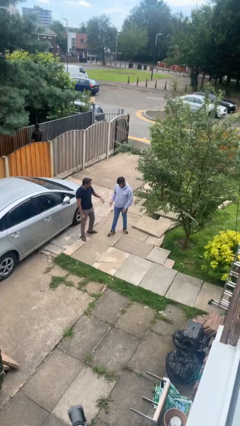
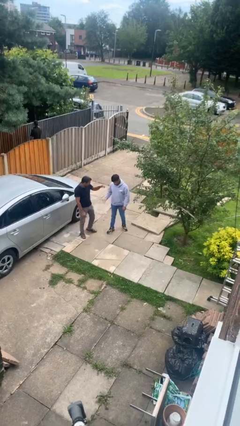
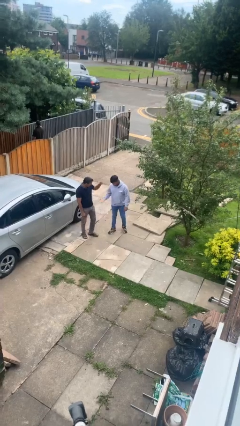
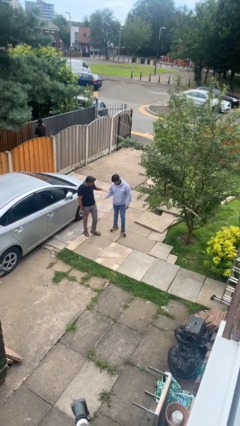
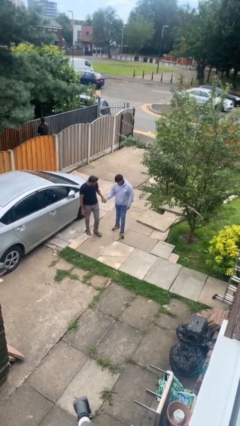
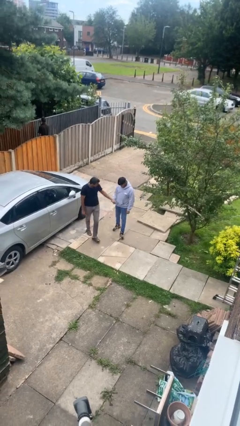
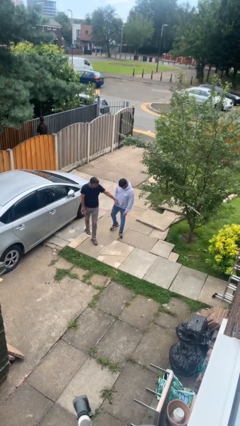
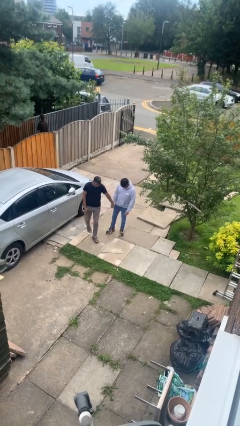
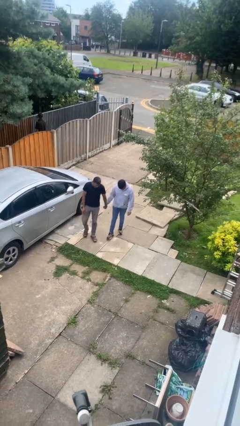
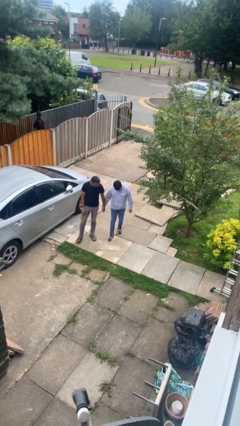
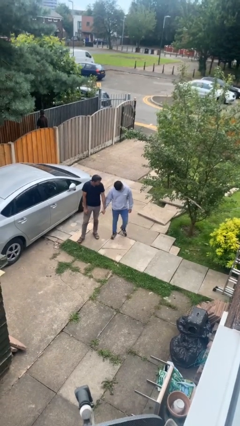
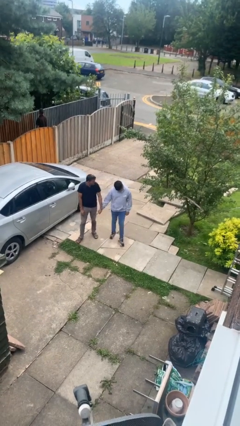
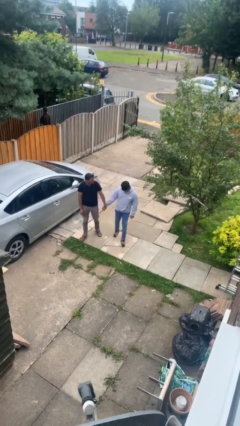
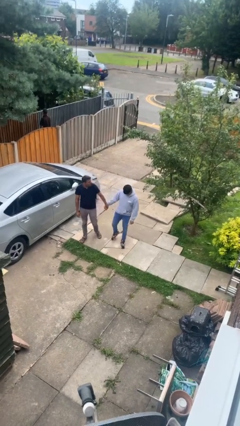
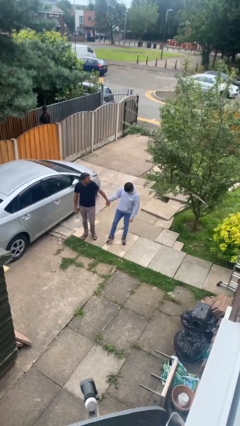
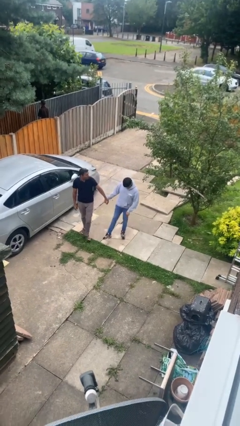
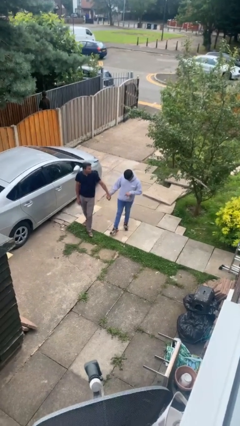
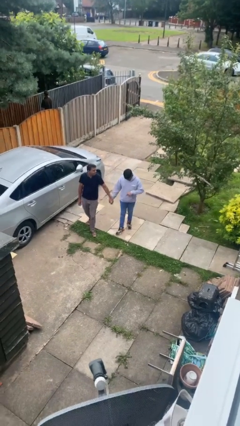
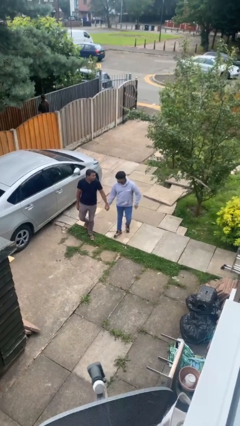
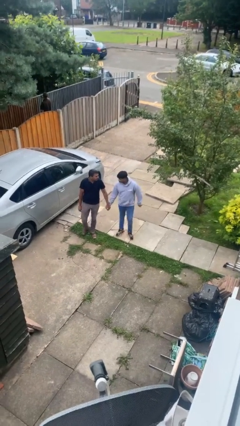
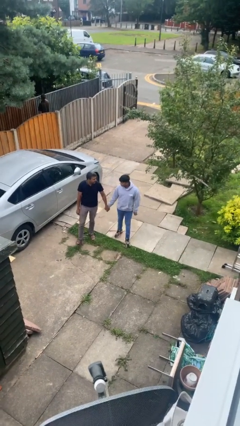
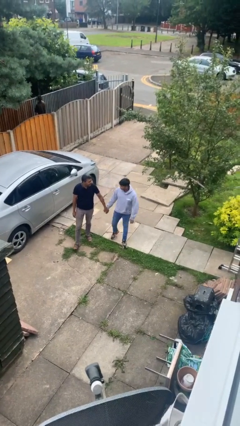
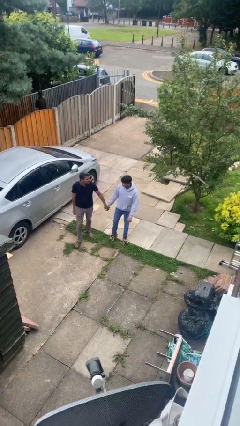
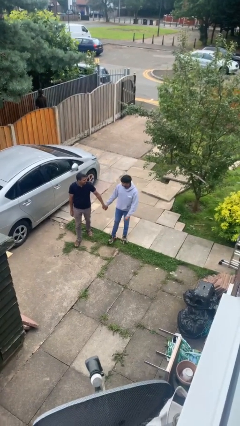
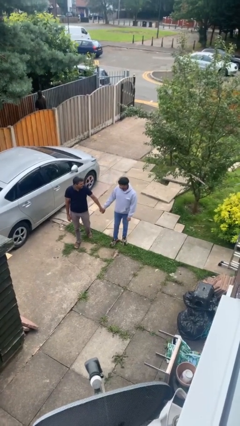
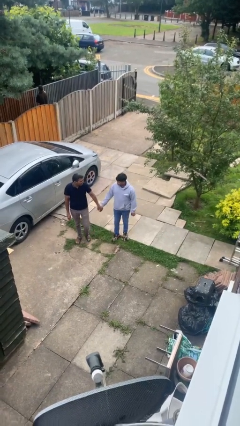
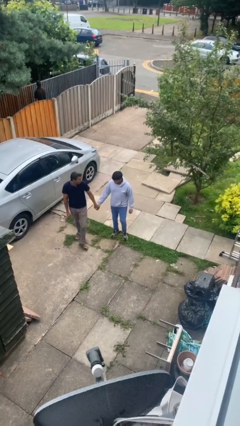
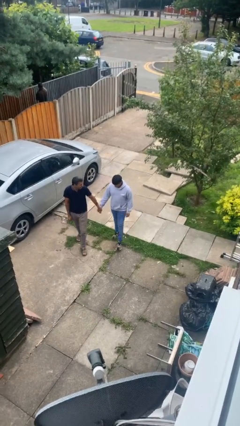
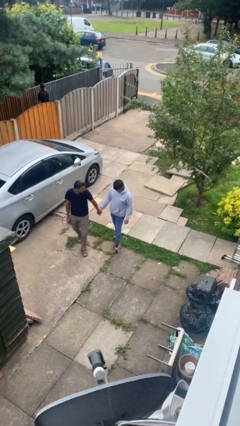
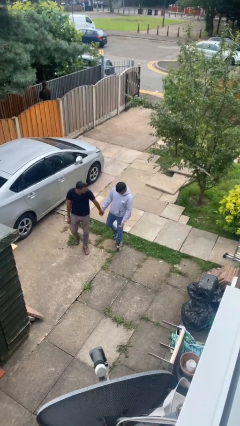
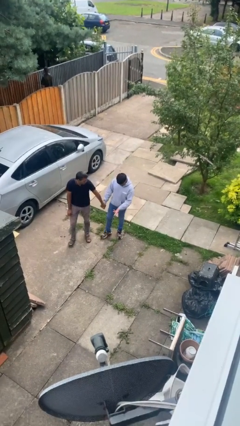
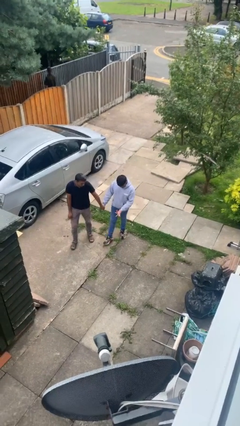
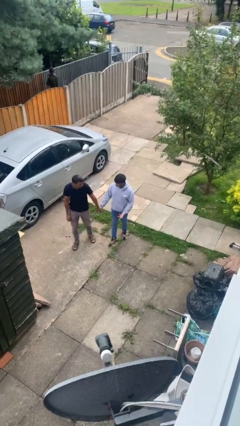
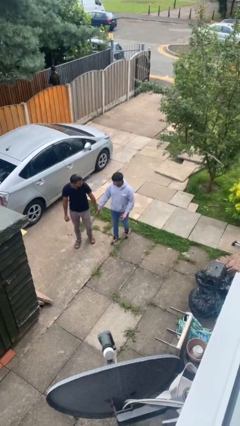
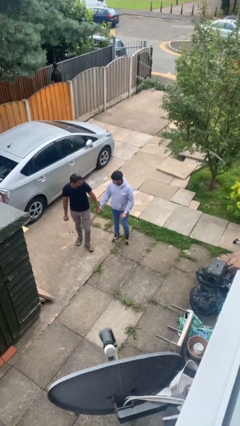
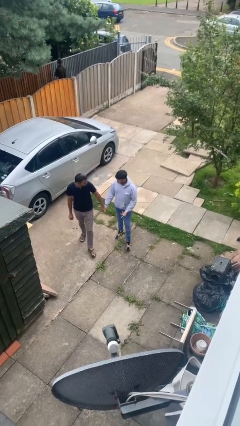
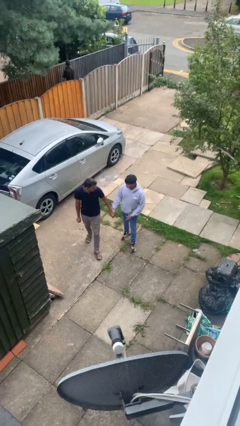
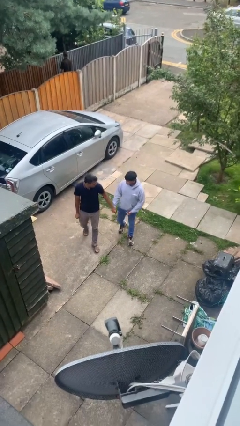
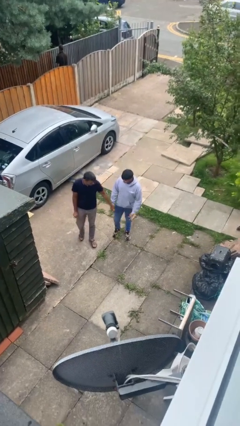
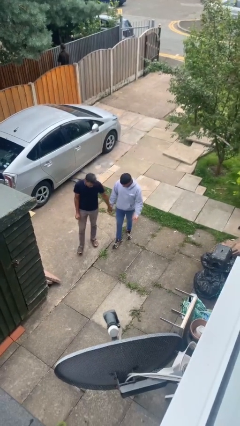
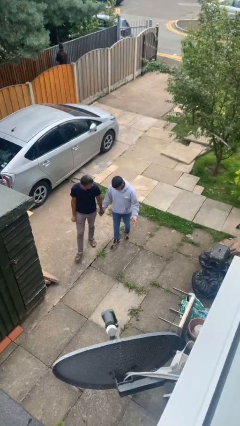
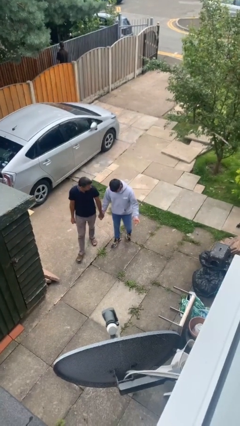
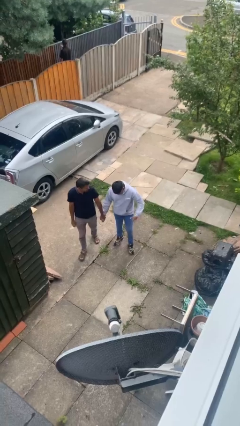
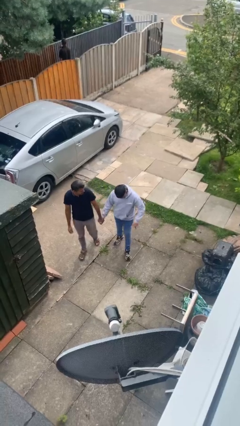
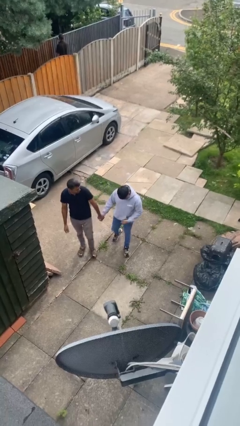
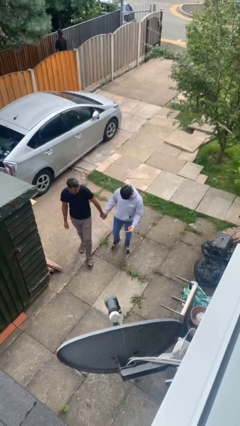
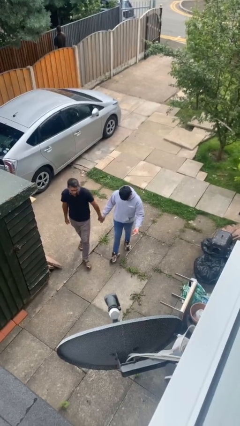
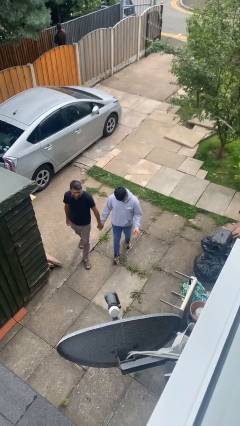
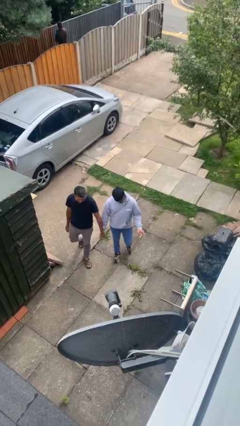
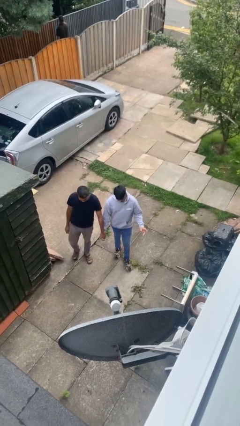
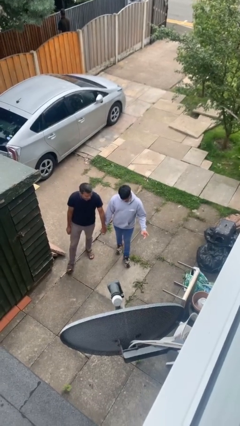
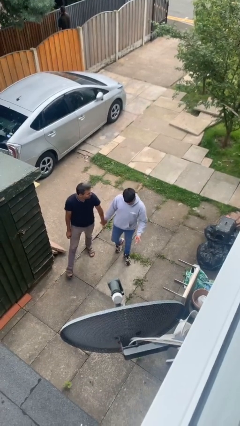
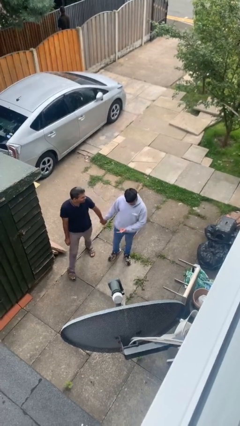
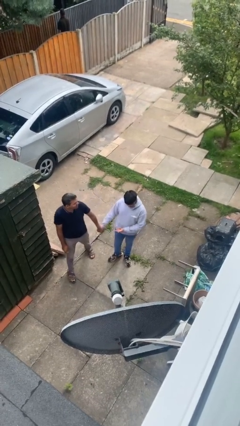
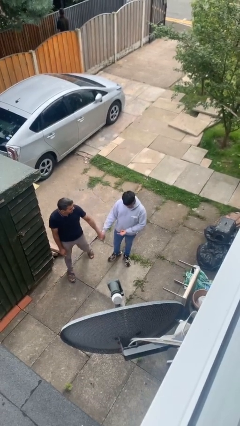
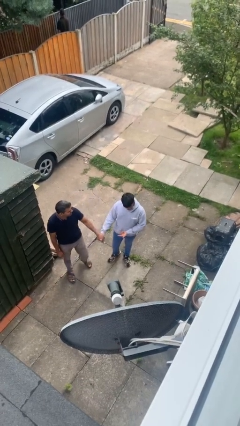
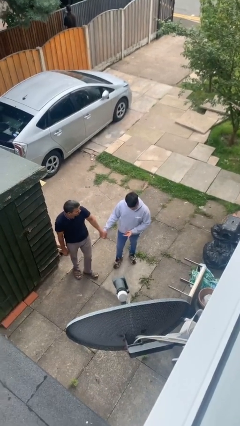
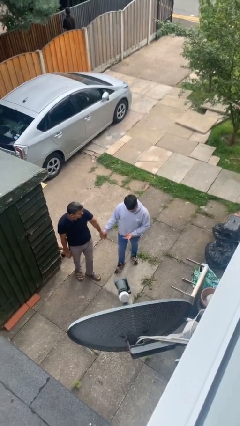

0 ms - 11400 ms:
person holds hand

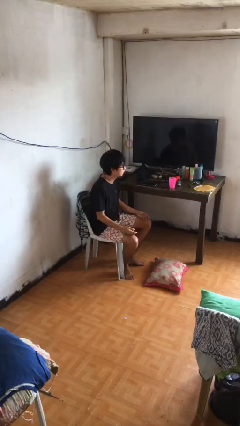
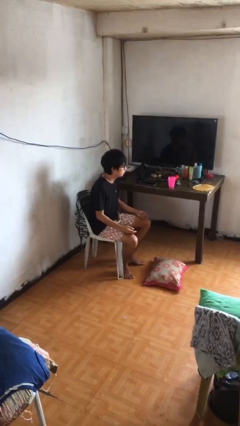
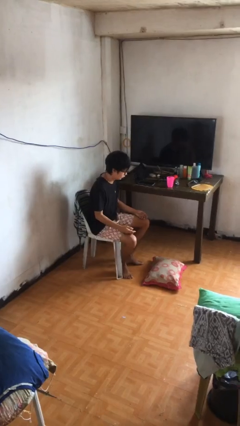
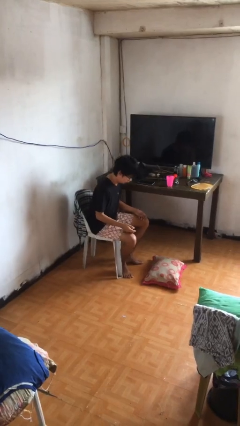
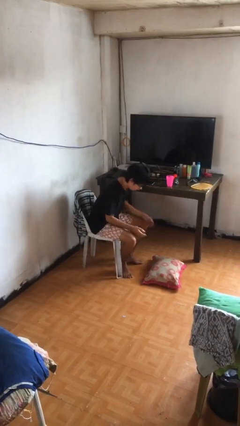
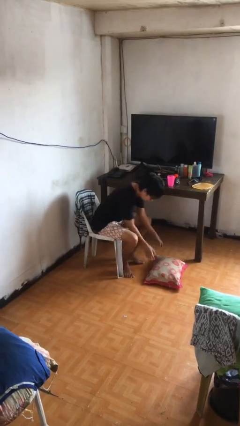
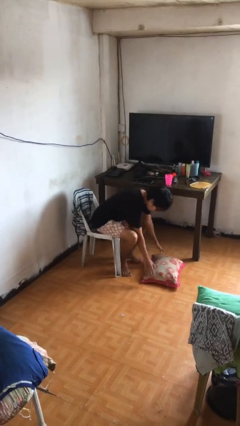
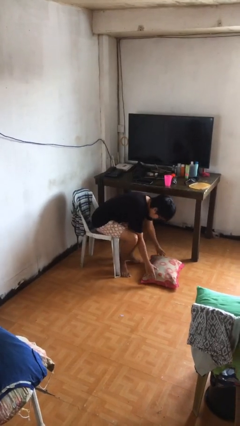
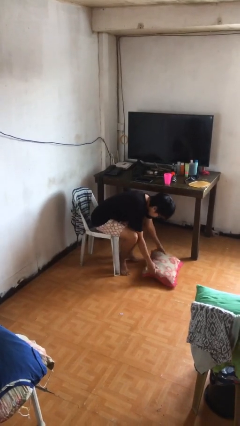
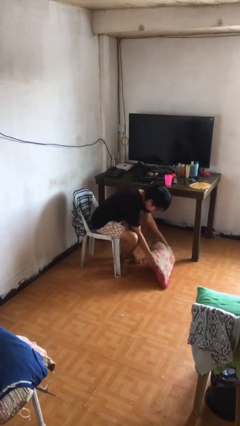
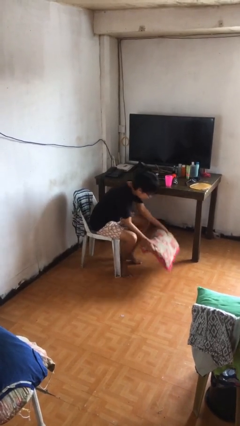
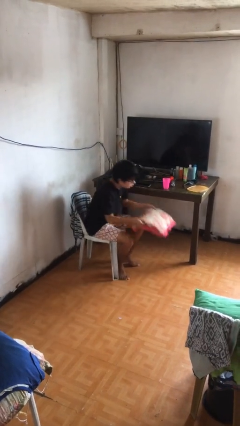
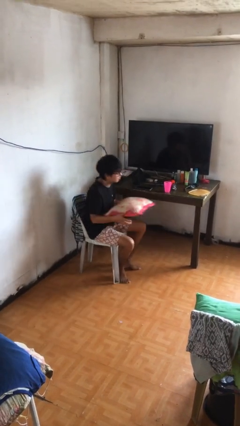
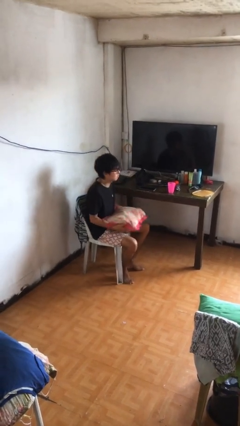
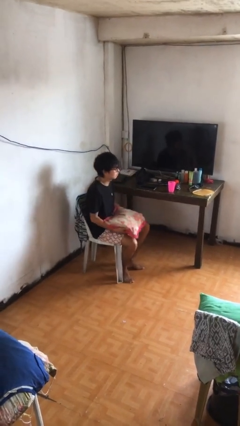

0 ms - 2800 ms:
person picks up object from floor

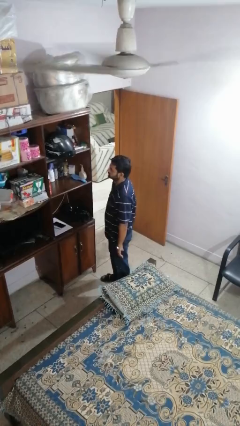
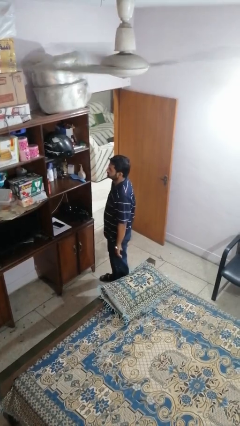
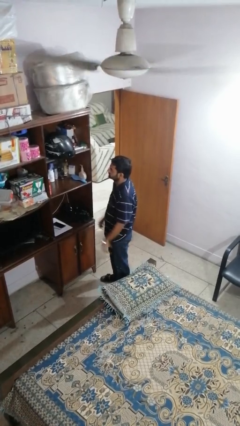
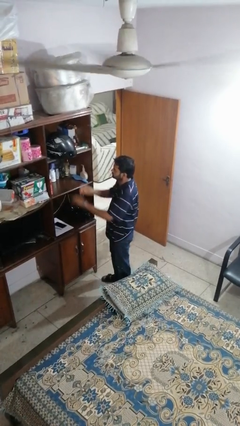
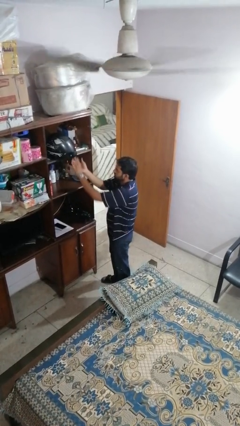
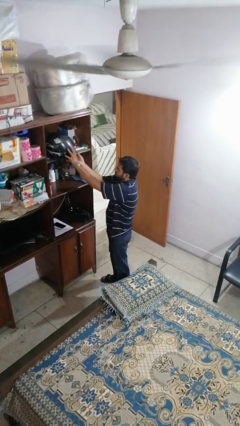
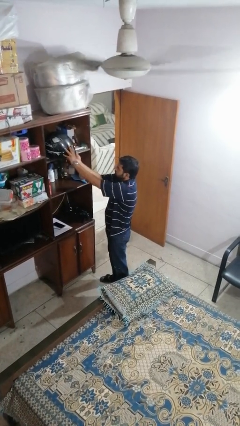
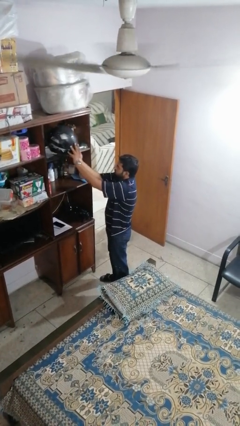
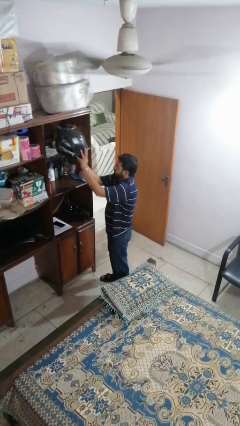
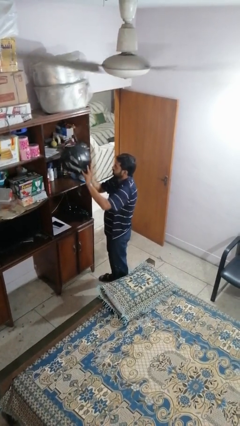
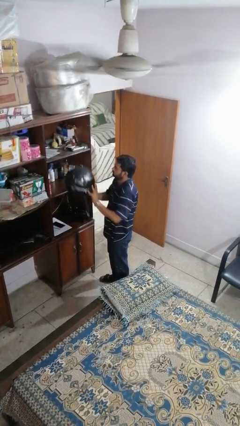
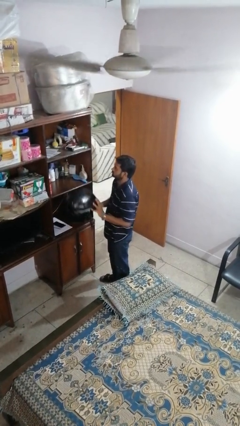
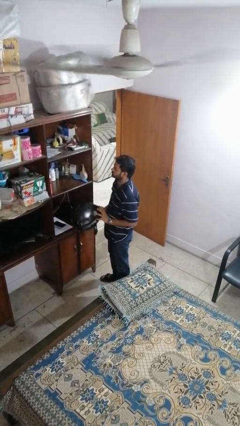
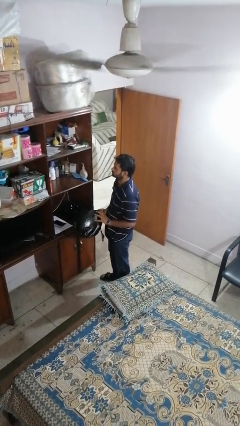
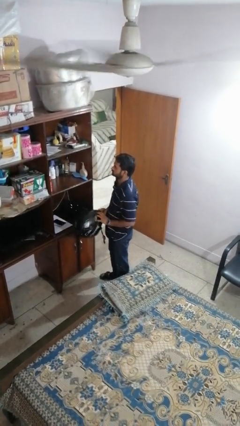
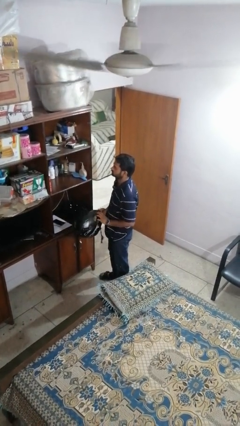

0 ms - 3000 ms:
person picks up object from shelf

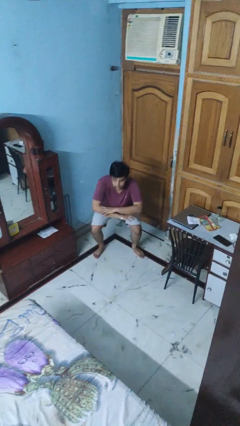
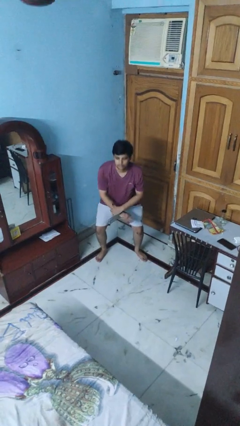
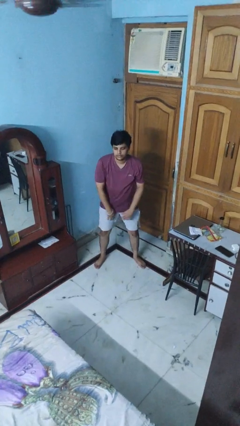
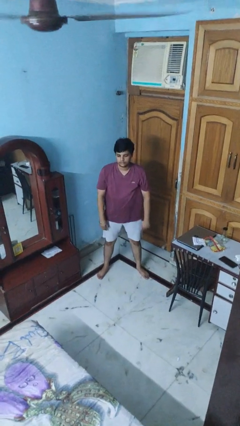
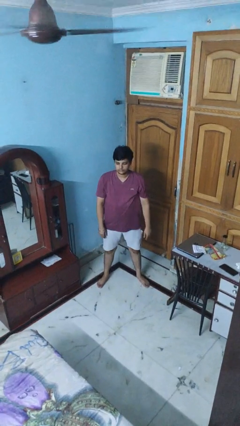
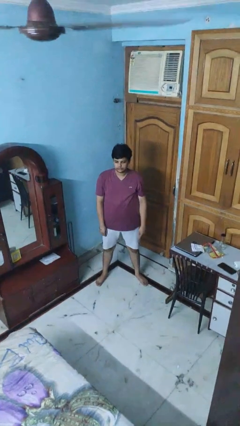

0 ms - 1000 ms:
person stands up
